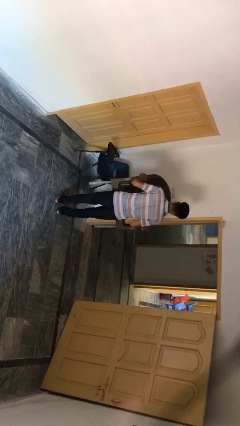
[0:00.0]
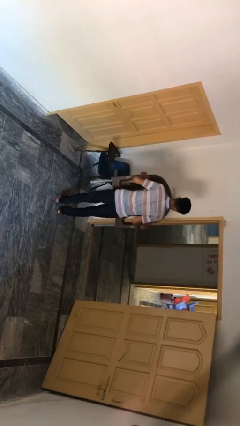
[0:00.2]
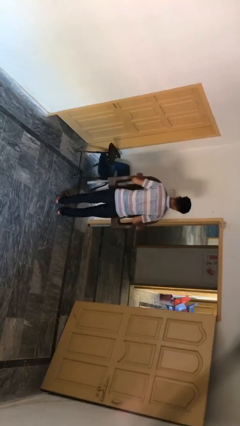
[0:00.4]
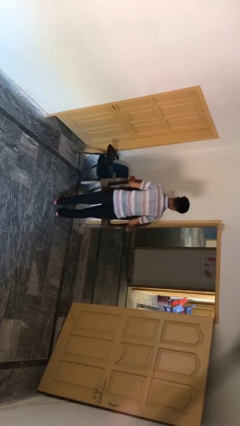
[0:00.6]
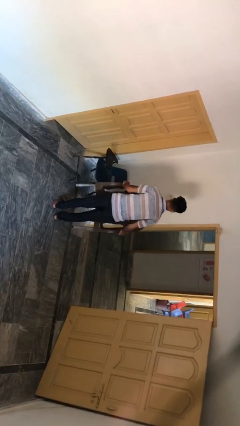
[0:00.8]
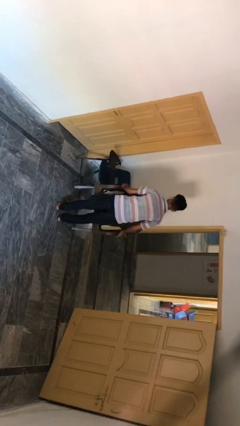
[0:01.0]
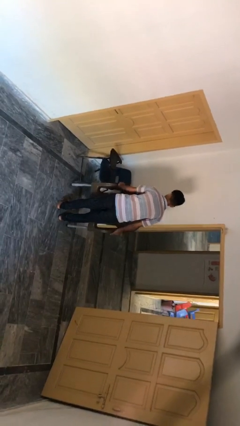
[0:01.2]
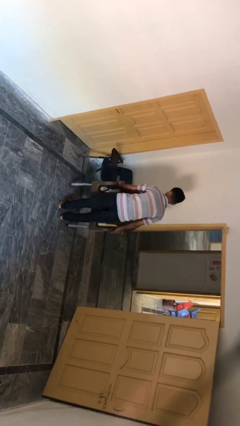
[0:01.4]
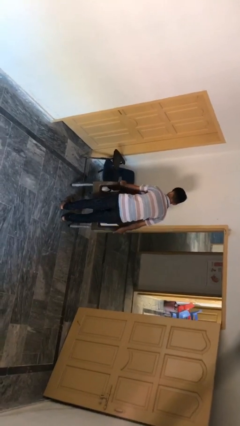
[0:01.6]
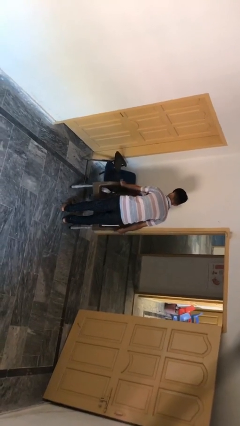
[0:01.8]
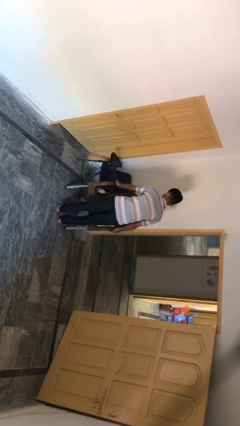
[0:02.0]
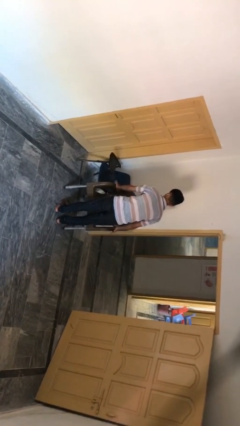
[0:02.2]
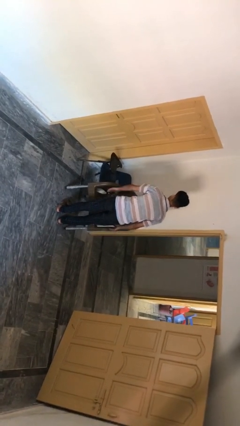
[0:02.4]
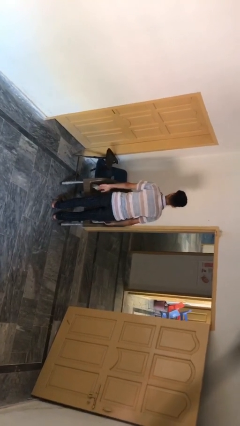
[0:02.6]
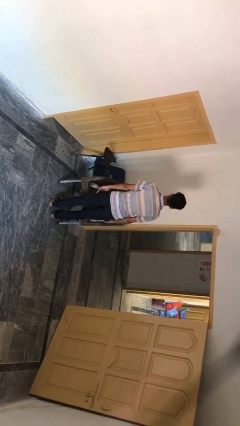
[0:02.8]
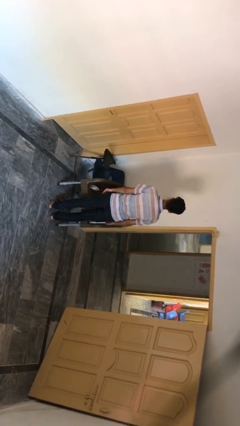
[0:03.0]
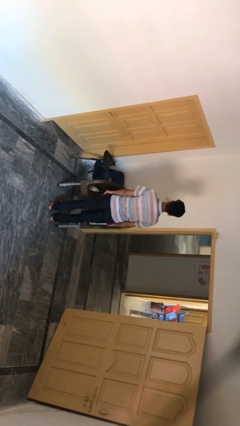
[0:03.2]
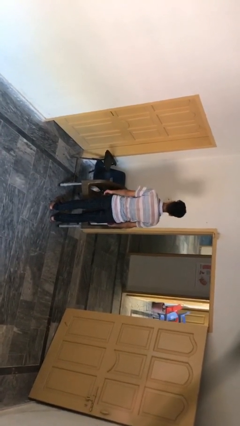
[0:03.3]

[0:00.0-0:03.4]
person puts down object on floor

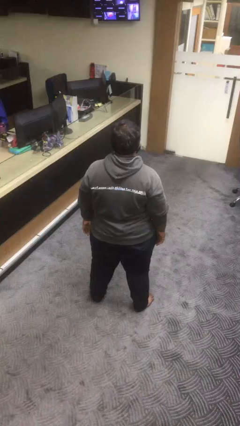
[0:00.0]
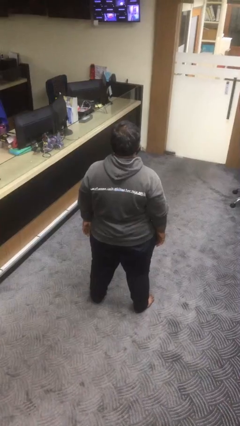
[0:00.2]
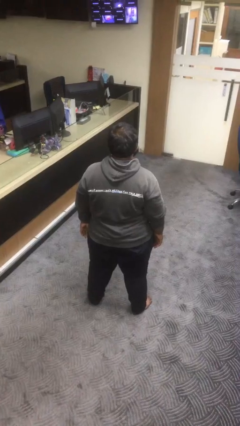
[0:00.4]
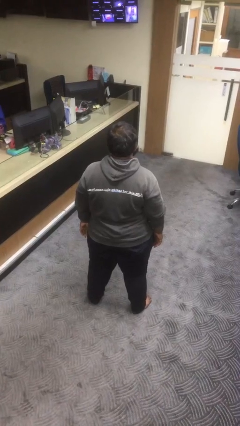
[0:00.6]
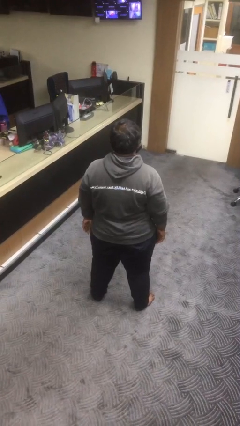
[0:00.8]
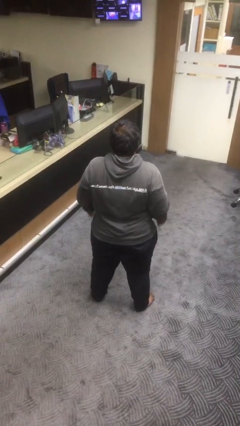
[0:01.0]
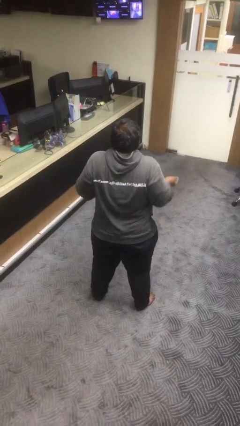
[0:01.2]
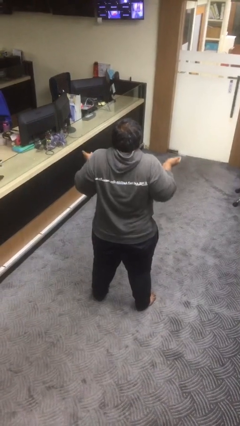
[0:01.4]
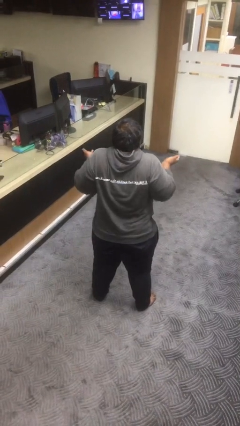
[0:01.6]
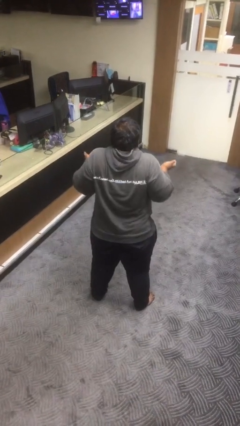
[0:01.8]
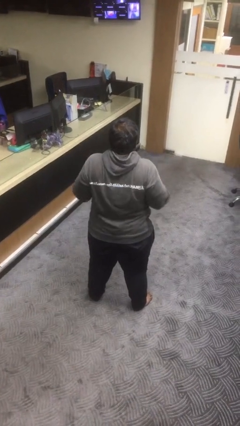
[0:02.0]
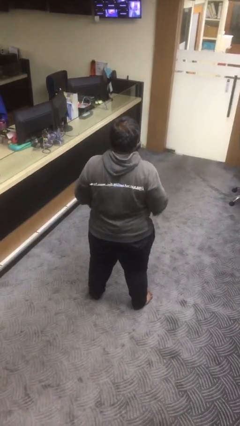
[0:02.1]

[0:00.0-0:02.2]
person shrugs

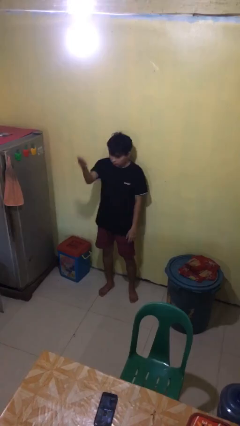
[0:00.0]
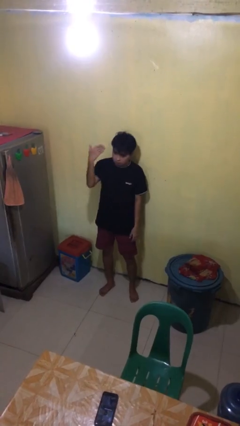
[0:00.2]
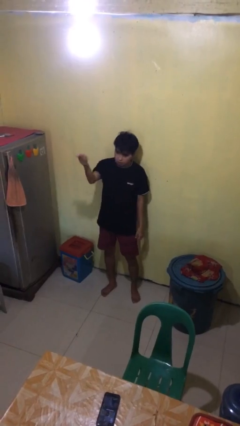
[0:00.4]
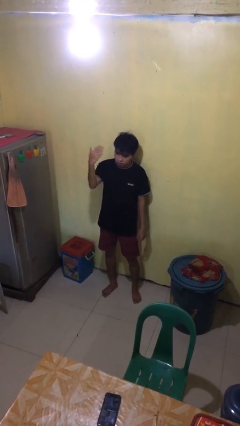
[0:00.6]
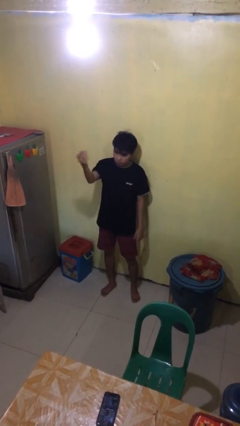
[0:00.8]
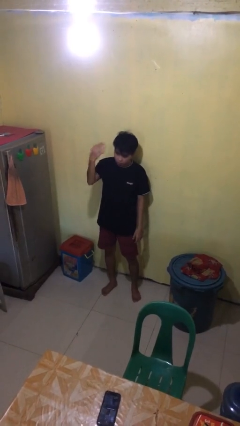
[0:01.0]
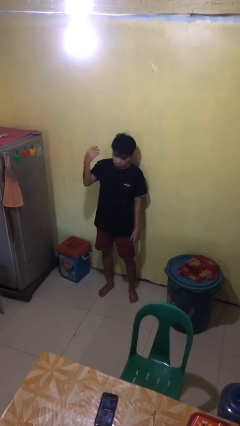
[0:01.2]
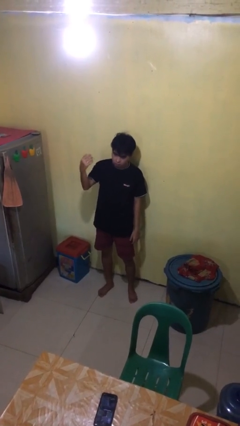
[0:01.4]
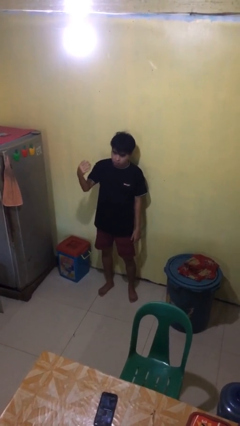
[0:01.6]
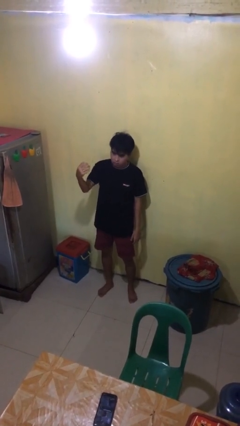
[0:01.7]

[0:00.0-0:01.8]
person gestures come here

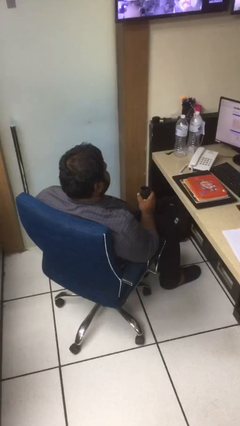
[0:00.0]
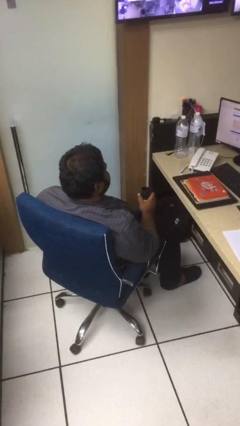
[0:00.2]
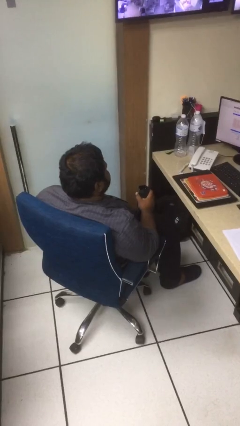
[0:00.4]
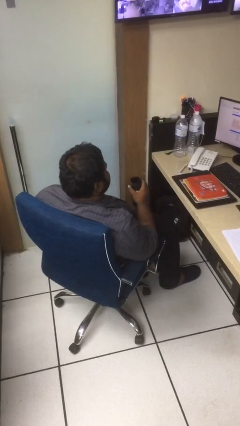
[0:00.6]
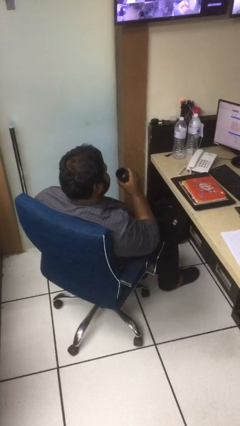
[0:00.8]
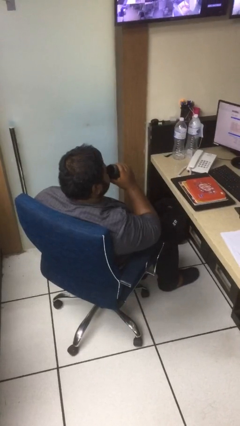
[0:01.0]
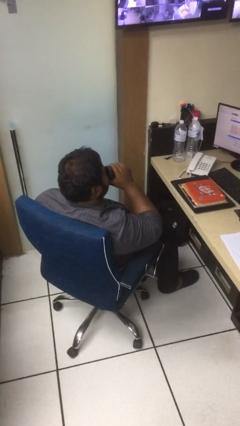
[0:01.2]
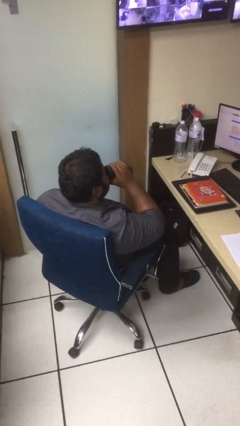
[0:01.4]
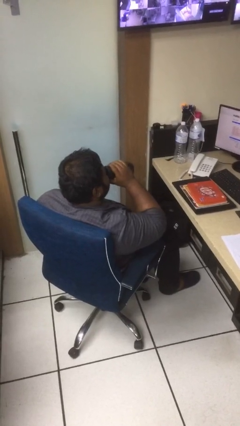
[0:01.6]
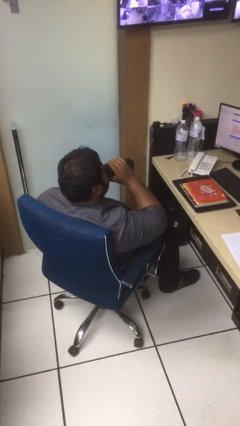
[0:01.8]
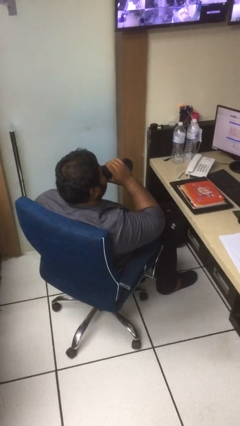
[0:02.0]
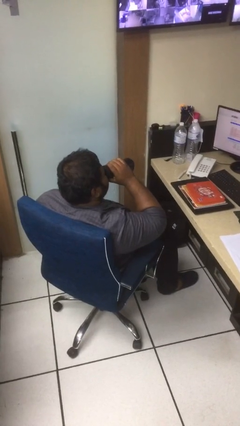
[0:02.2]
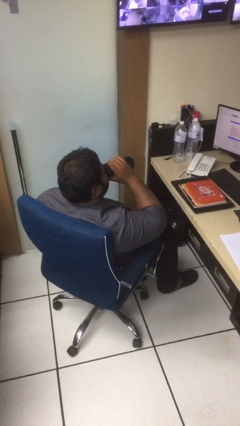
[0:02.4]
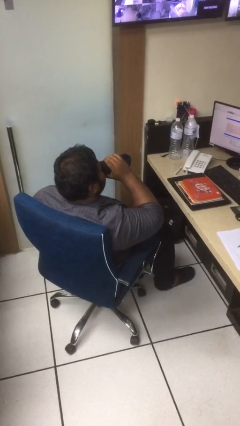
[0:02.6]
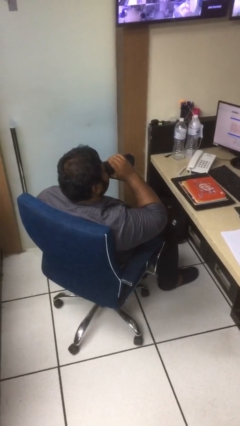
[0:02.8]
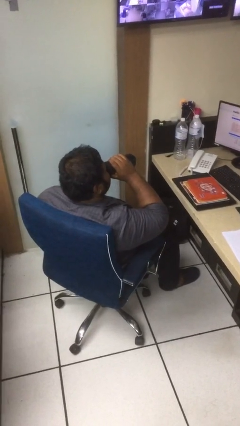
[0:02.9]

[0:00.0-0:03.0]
person drinks from bottle

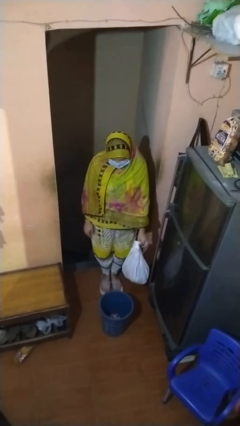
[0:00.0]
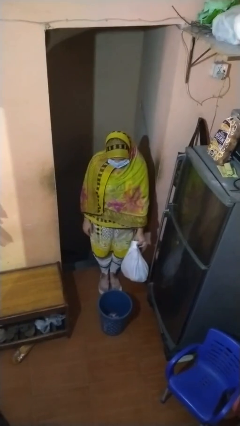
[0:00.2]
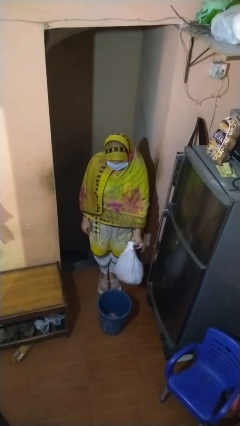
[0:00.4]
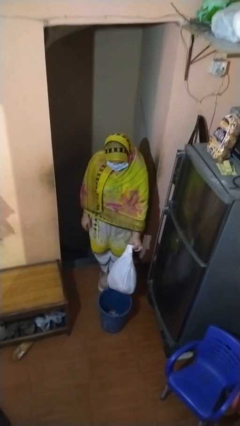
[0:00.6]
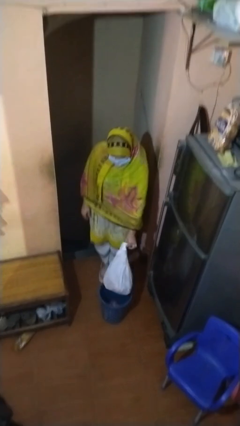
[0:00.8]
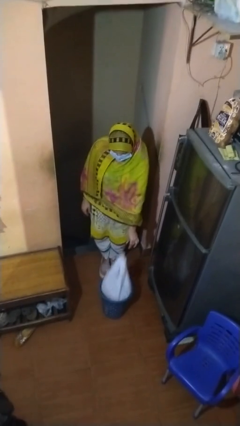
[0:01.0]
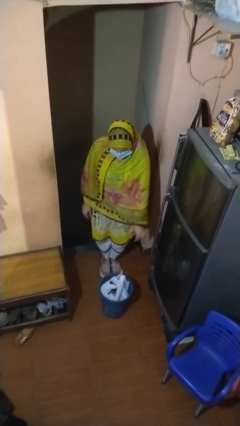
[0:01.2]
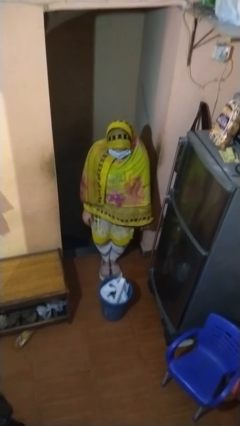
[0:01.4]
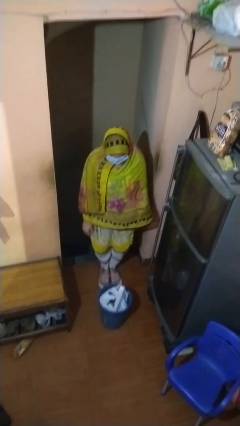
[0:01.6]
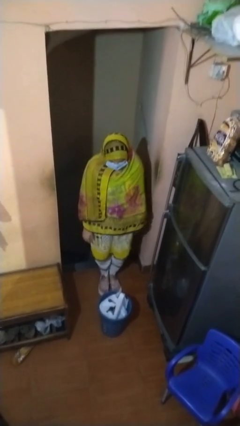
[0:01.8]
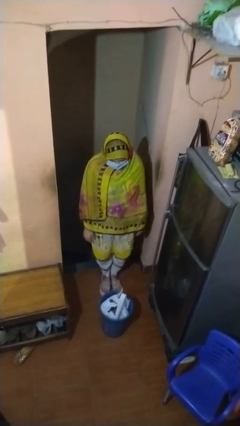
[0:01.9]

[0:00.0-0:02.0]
person inserts trashbag into trashcan

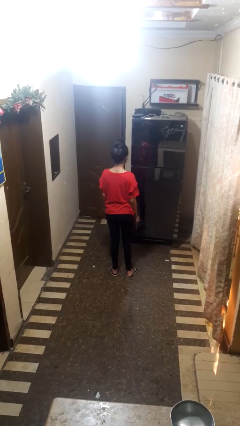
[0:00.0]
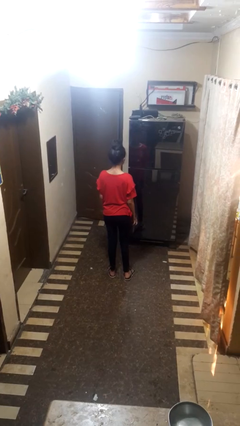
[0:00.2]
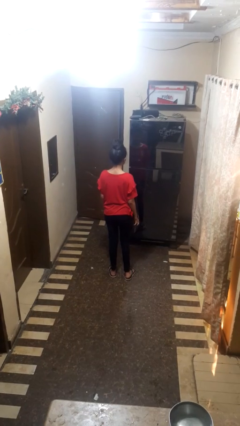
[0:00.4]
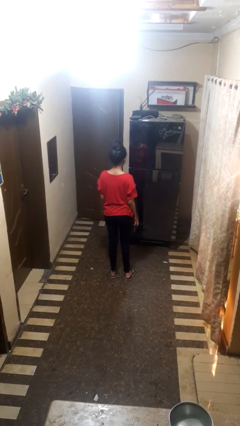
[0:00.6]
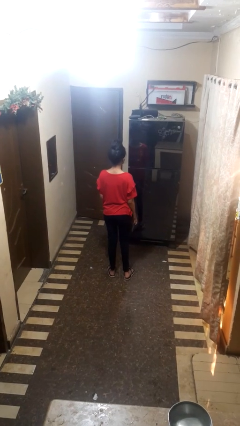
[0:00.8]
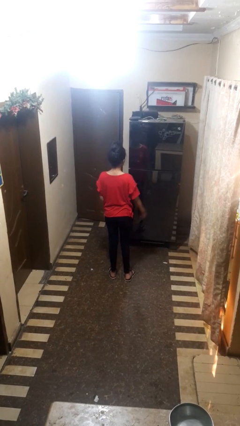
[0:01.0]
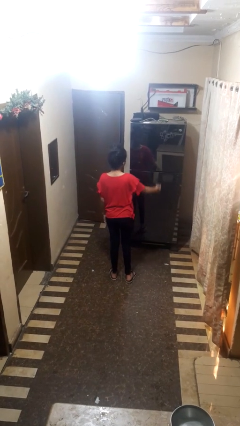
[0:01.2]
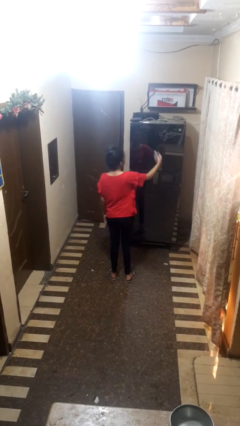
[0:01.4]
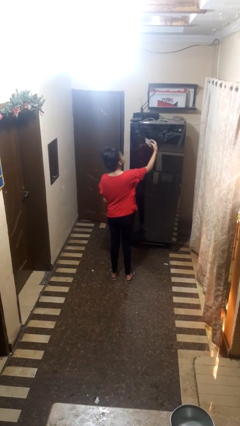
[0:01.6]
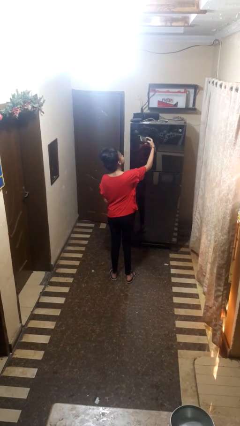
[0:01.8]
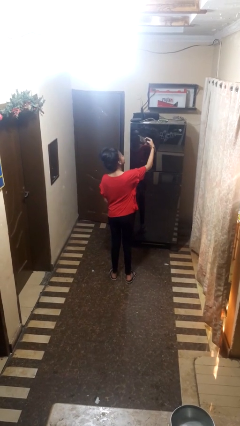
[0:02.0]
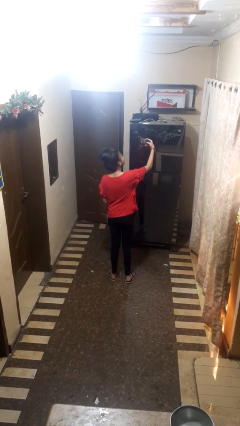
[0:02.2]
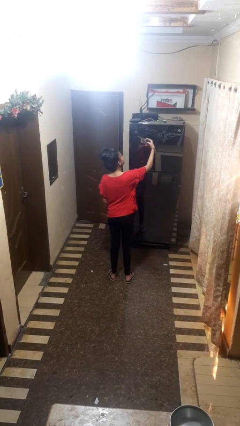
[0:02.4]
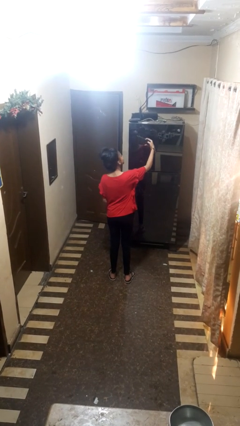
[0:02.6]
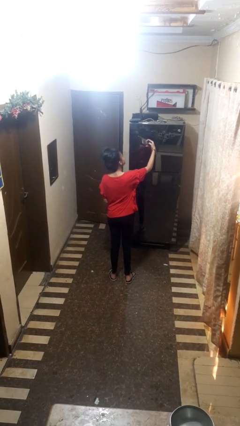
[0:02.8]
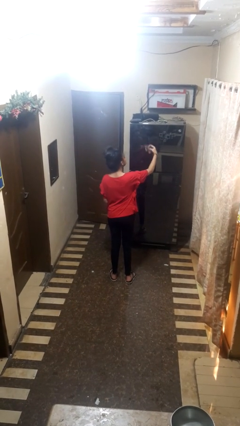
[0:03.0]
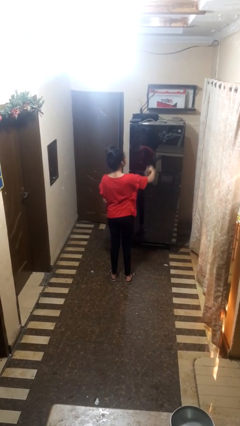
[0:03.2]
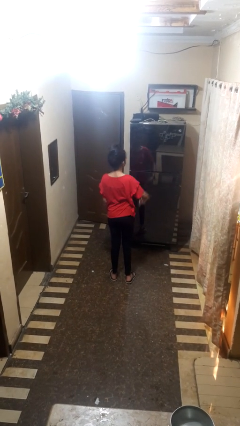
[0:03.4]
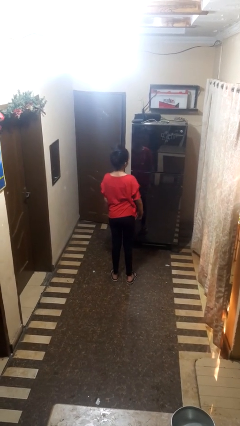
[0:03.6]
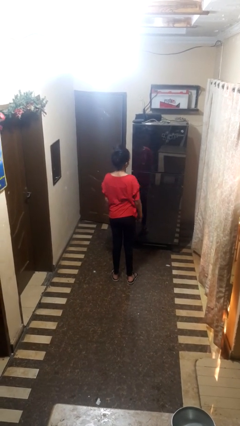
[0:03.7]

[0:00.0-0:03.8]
person takes selfie

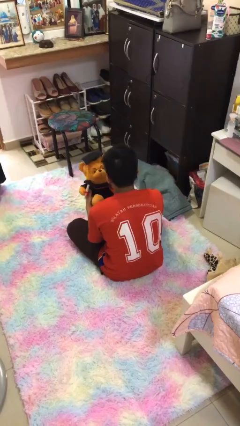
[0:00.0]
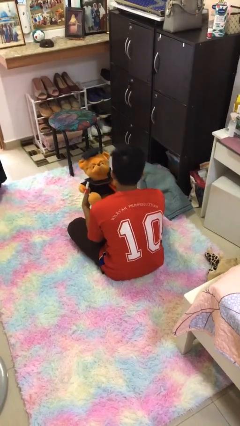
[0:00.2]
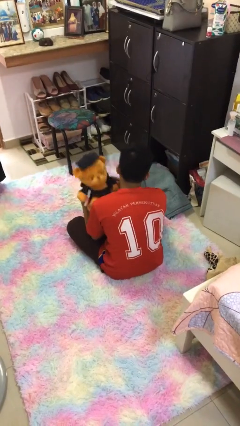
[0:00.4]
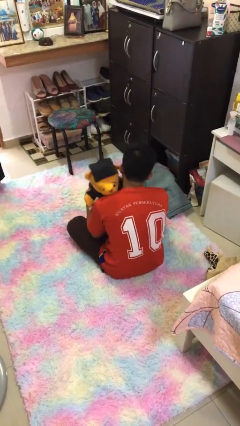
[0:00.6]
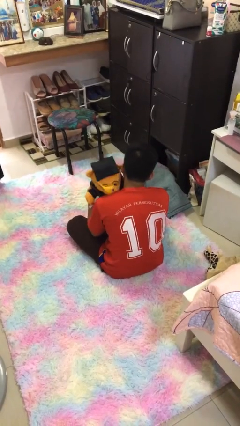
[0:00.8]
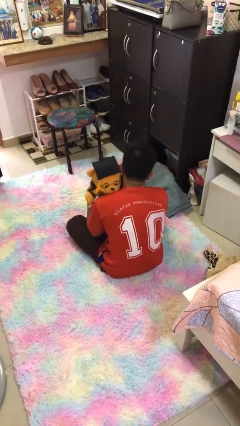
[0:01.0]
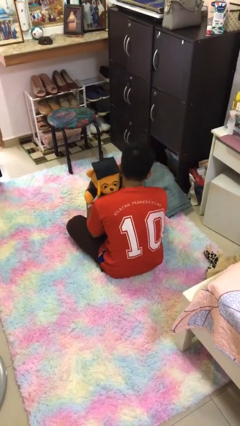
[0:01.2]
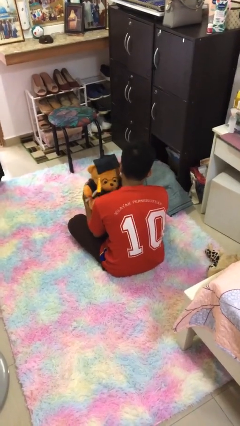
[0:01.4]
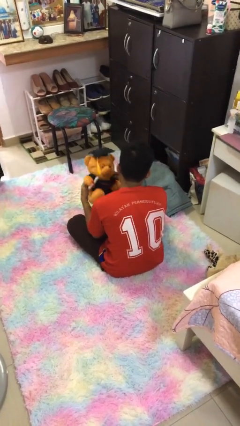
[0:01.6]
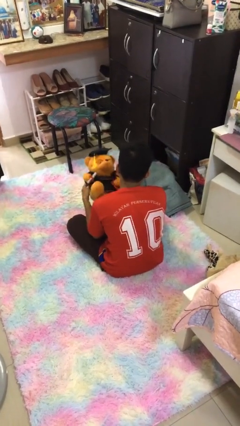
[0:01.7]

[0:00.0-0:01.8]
person hugs stuffed animal
